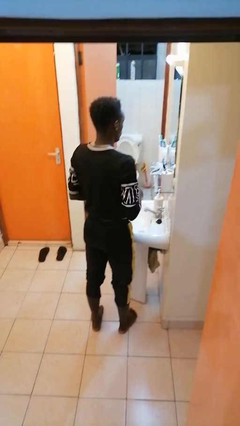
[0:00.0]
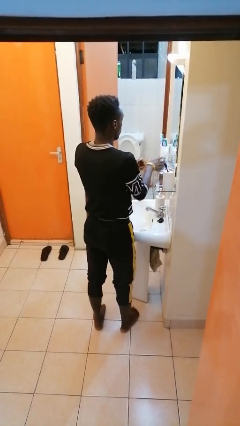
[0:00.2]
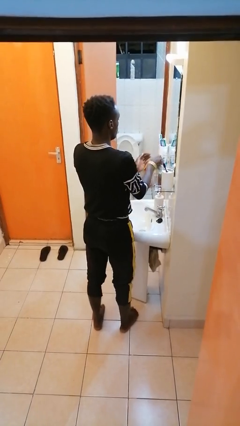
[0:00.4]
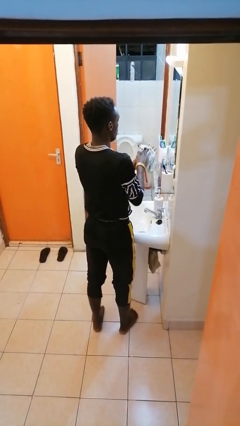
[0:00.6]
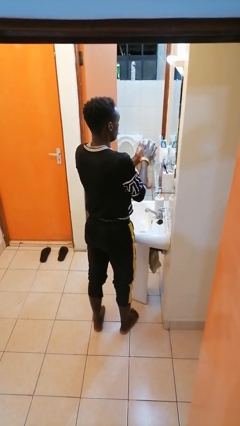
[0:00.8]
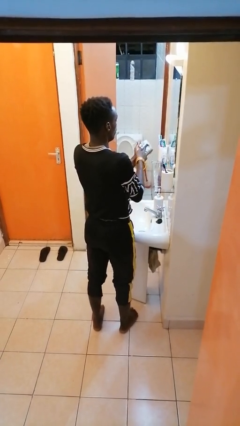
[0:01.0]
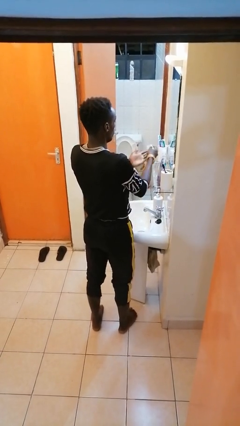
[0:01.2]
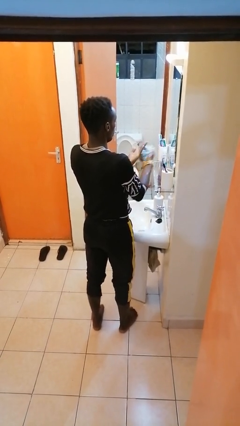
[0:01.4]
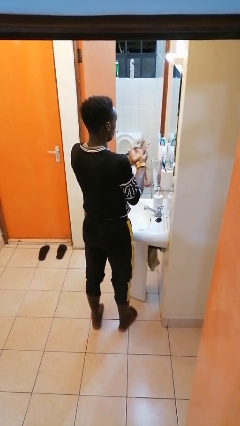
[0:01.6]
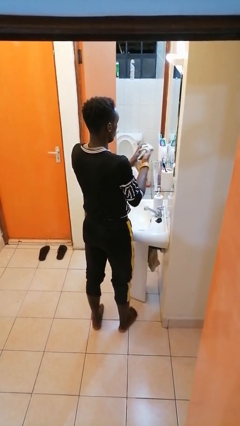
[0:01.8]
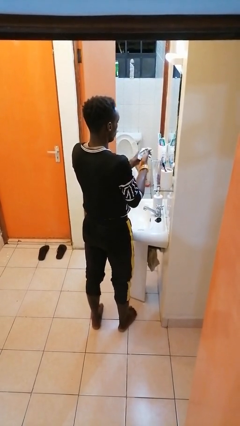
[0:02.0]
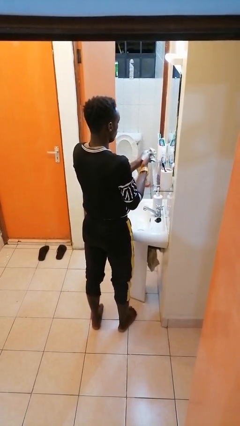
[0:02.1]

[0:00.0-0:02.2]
person dries hands with towel

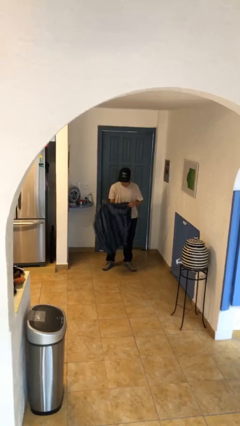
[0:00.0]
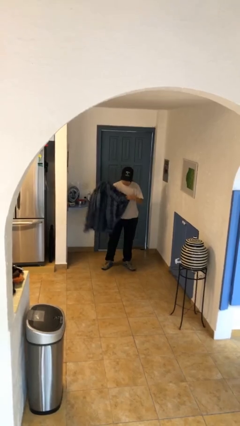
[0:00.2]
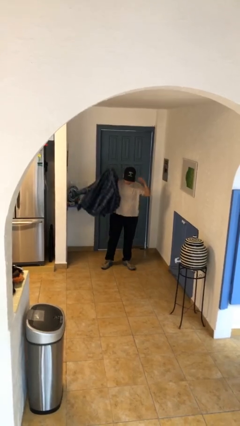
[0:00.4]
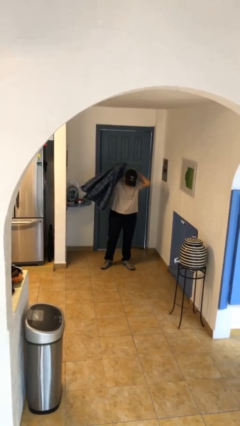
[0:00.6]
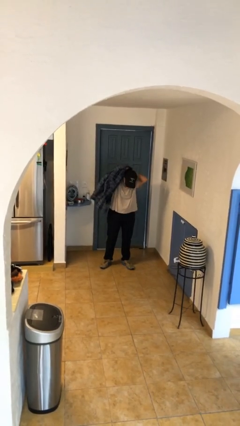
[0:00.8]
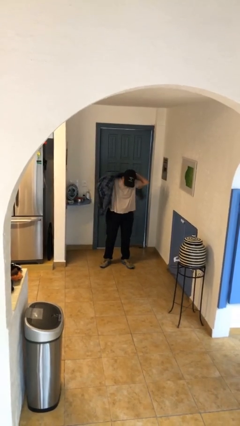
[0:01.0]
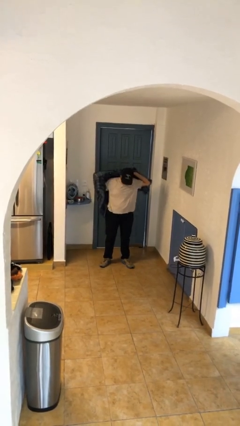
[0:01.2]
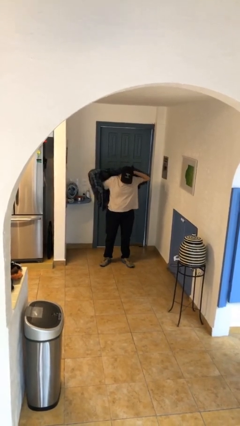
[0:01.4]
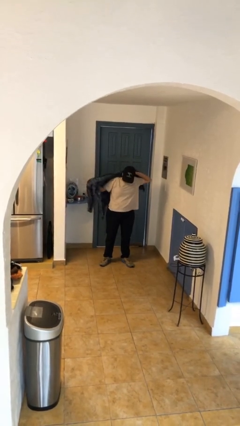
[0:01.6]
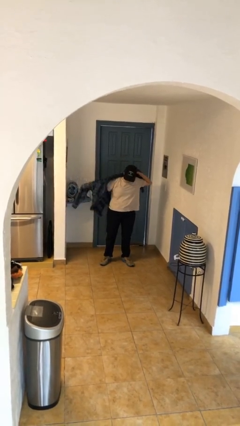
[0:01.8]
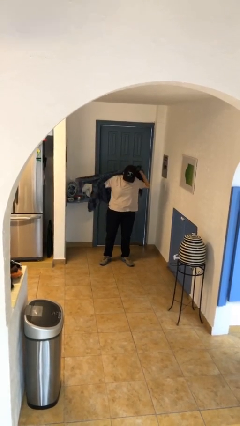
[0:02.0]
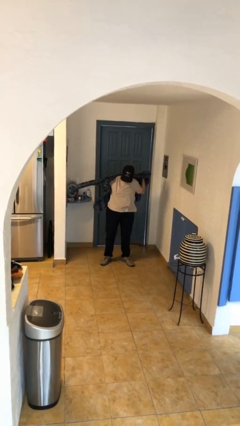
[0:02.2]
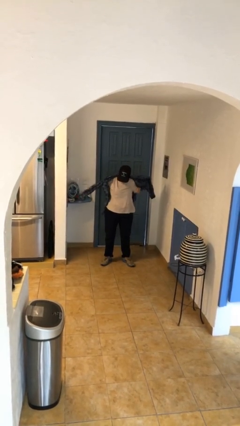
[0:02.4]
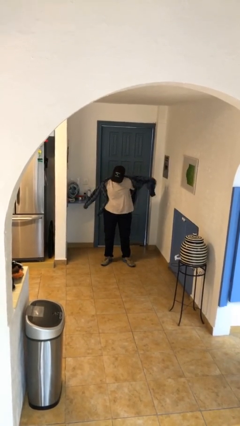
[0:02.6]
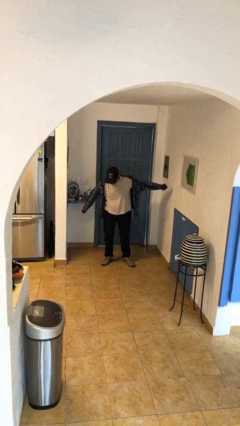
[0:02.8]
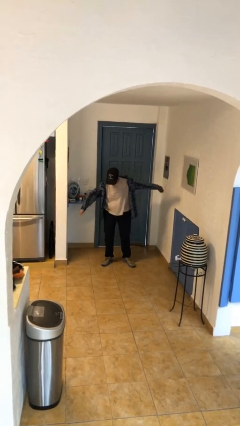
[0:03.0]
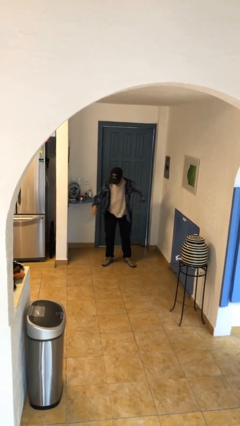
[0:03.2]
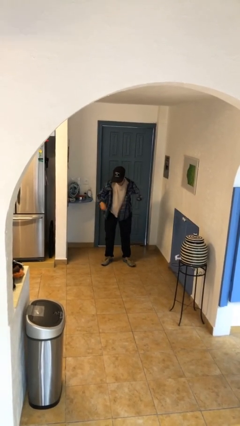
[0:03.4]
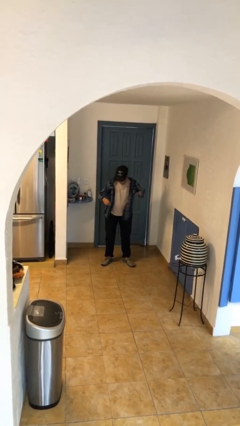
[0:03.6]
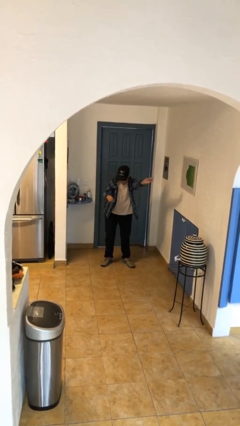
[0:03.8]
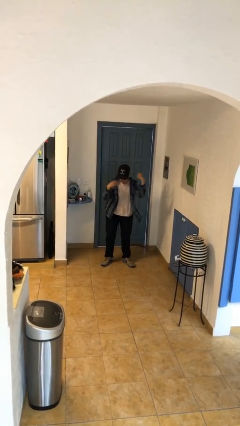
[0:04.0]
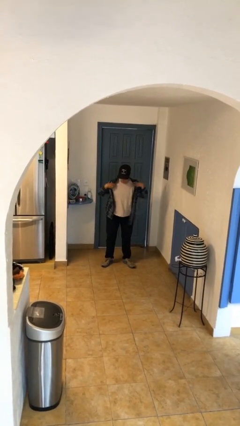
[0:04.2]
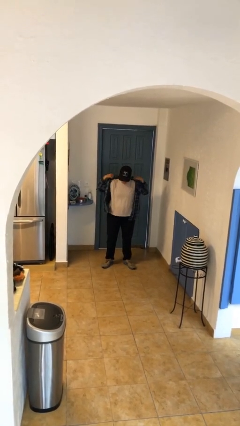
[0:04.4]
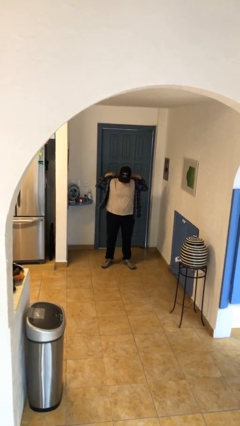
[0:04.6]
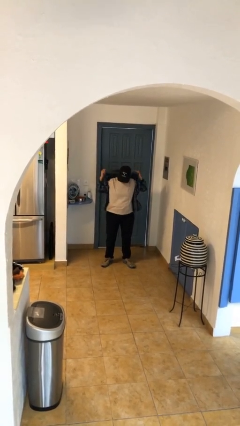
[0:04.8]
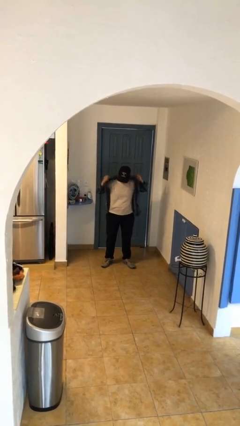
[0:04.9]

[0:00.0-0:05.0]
person puts on shirt

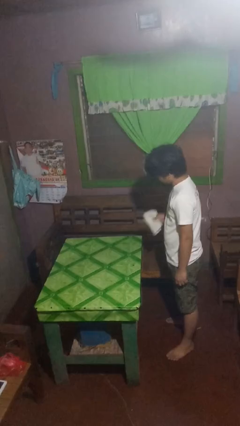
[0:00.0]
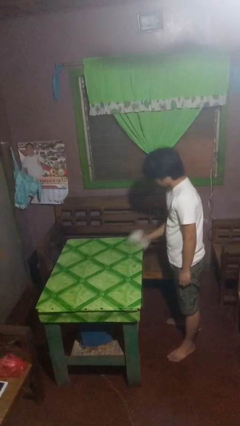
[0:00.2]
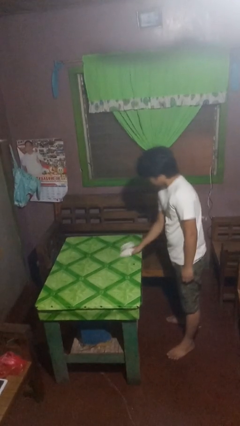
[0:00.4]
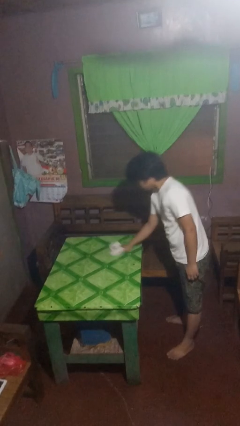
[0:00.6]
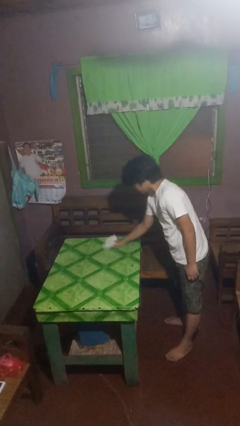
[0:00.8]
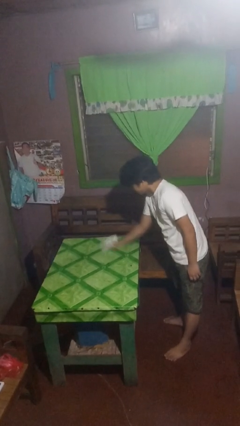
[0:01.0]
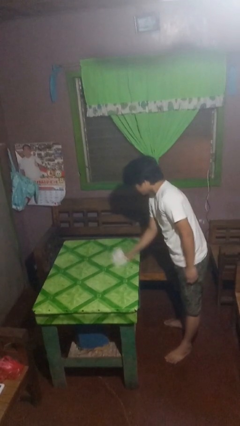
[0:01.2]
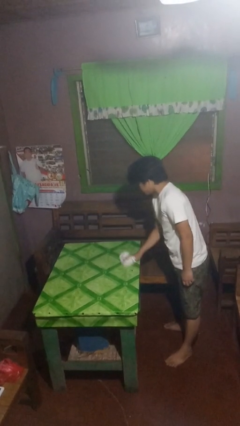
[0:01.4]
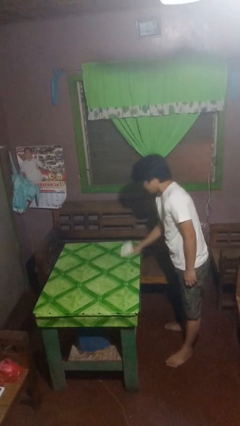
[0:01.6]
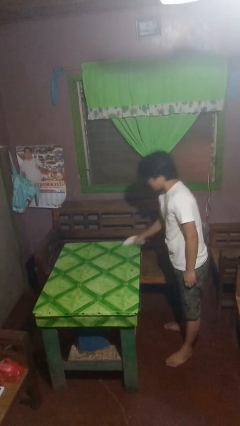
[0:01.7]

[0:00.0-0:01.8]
person cleans table with rag

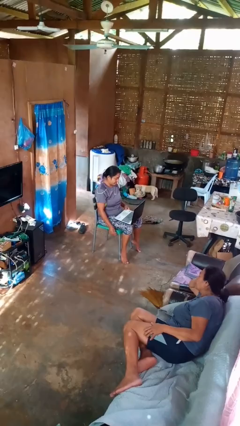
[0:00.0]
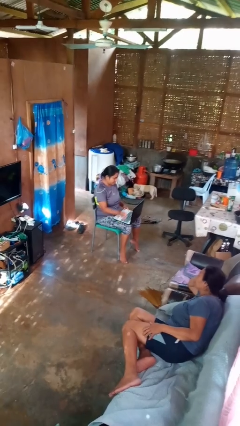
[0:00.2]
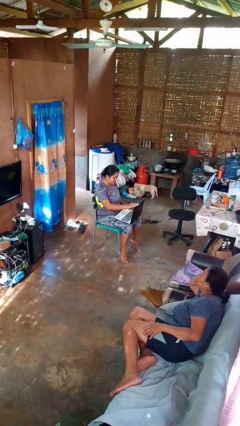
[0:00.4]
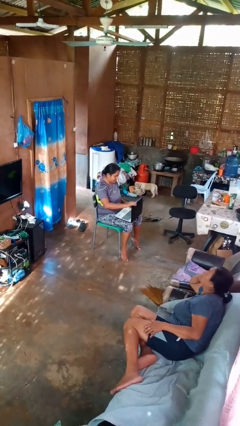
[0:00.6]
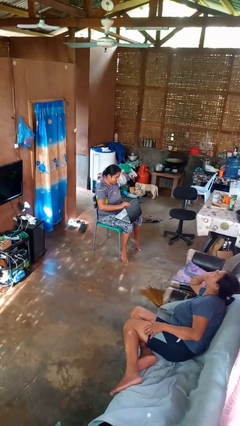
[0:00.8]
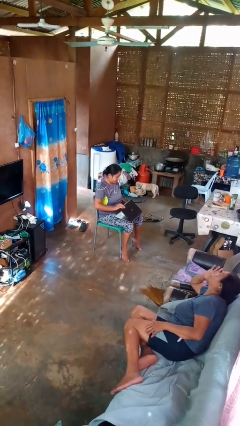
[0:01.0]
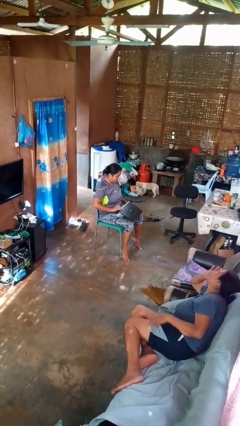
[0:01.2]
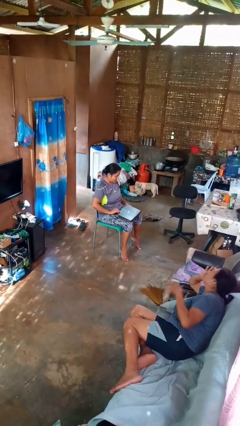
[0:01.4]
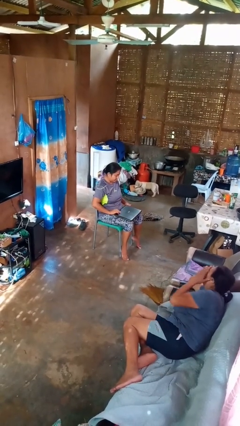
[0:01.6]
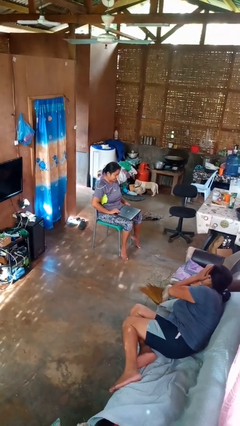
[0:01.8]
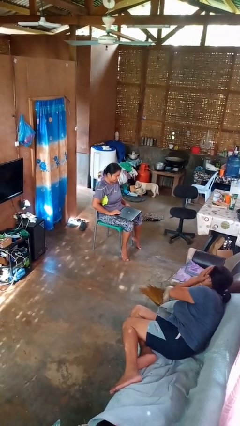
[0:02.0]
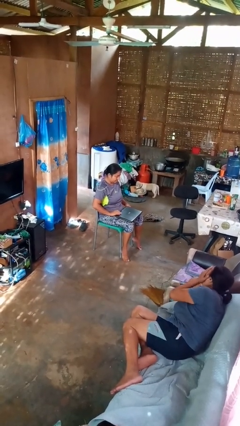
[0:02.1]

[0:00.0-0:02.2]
person closes laptop

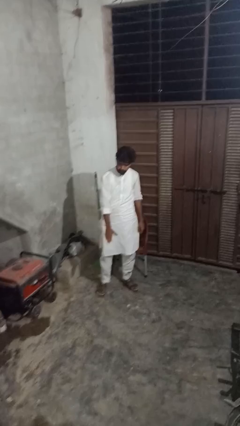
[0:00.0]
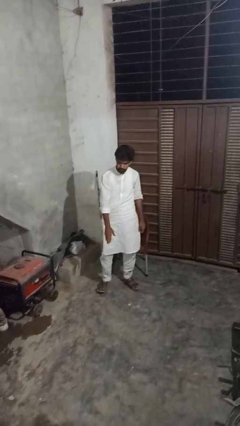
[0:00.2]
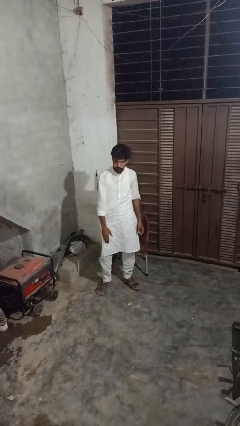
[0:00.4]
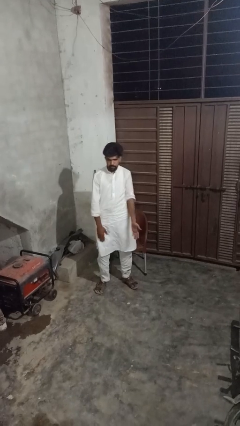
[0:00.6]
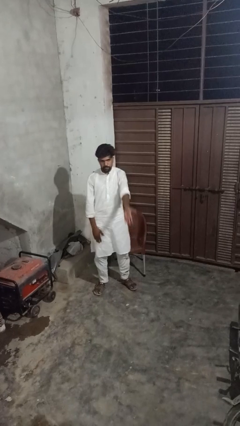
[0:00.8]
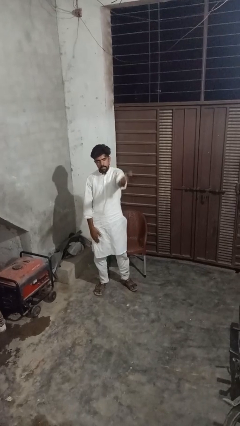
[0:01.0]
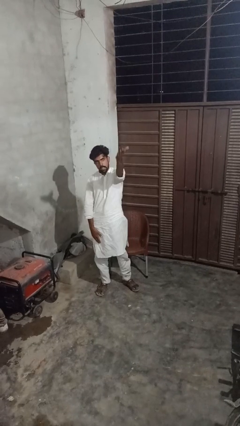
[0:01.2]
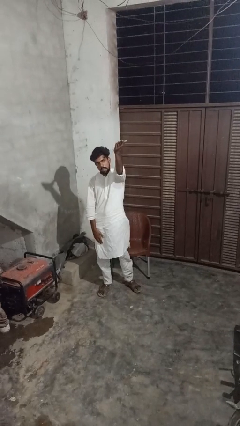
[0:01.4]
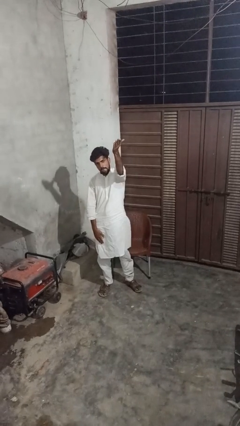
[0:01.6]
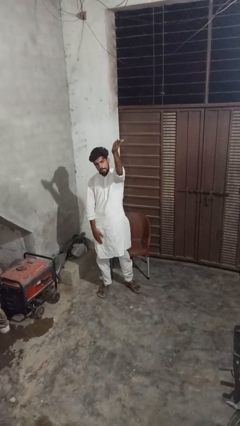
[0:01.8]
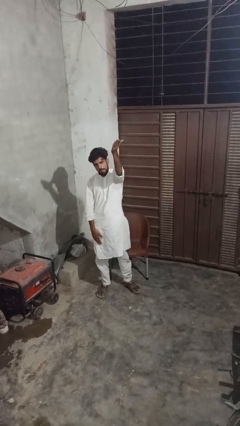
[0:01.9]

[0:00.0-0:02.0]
person gestures swipe up

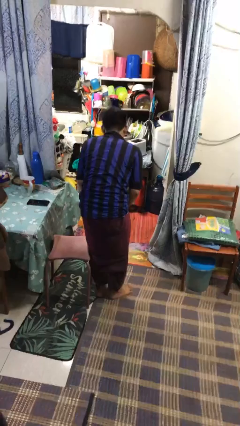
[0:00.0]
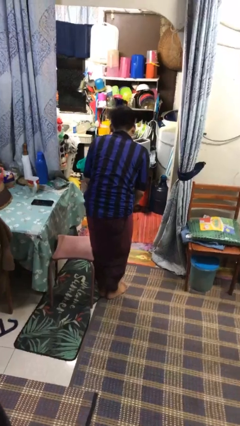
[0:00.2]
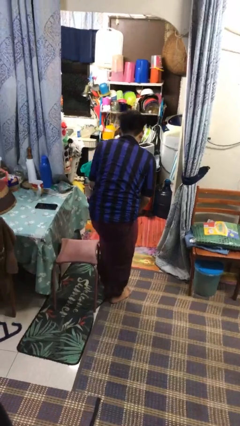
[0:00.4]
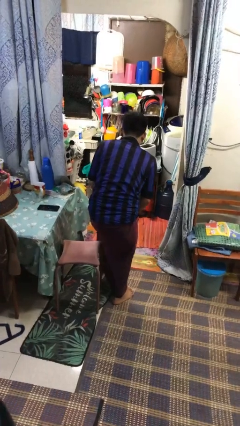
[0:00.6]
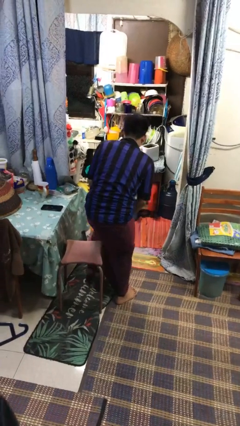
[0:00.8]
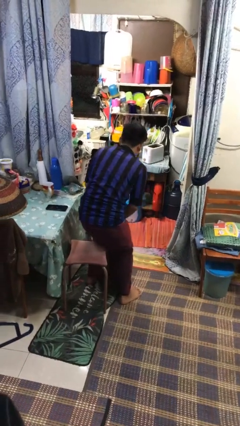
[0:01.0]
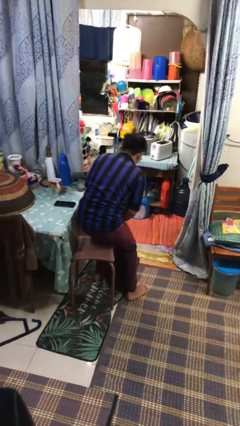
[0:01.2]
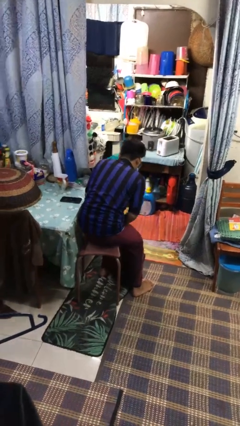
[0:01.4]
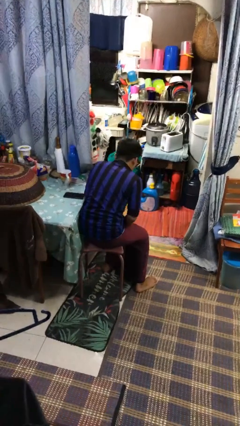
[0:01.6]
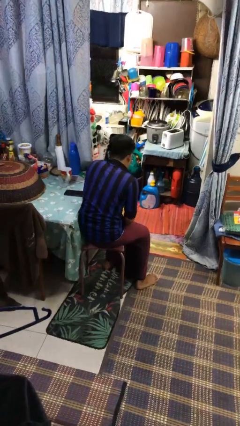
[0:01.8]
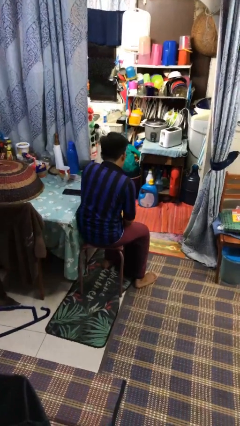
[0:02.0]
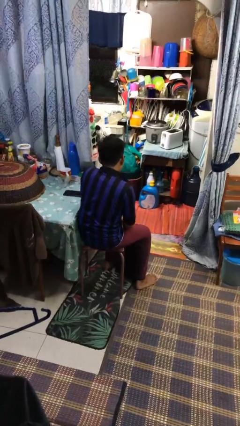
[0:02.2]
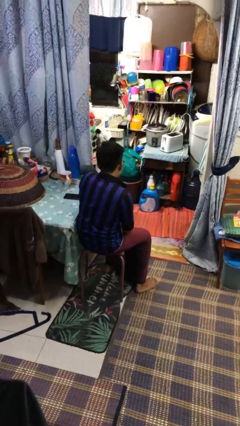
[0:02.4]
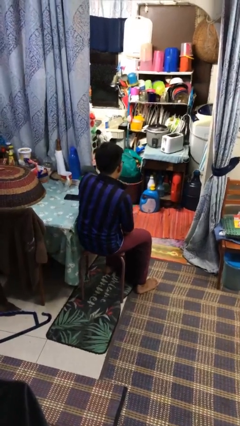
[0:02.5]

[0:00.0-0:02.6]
person sits down

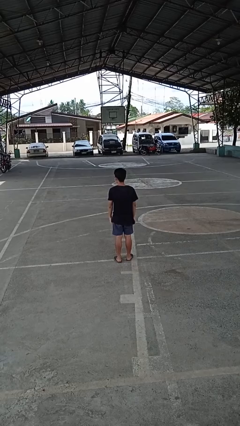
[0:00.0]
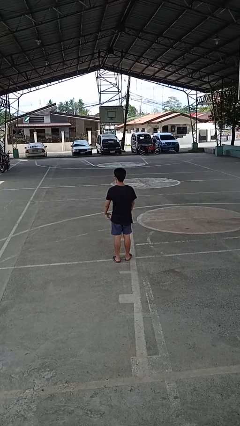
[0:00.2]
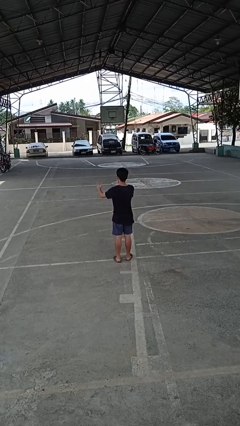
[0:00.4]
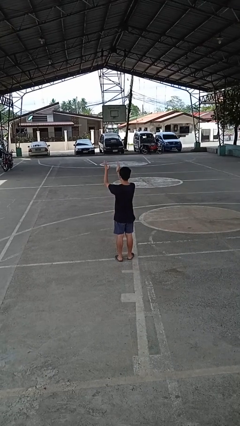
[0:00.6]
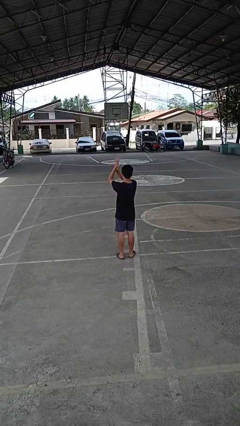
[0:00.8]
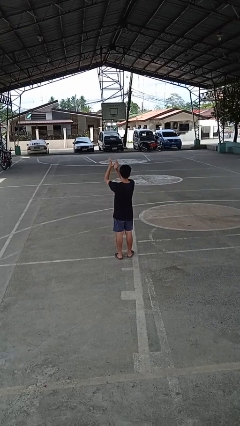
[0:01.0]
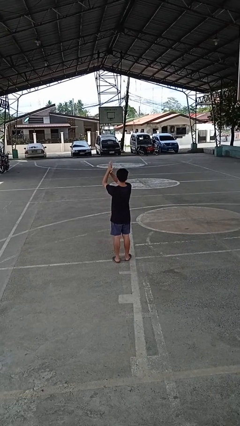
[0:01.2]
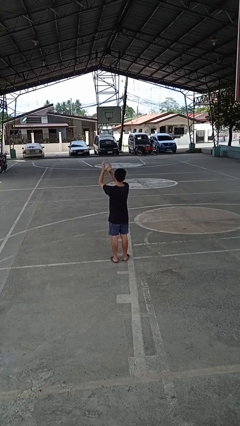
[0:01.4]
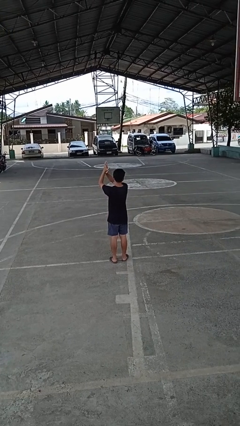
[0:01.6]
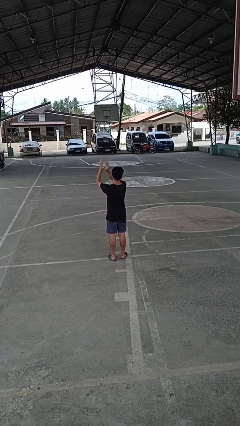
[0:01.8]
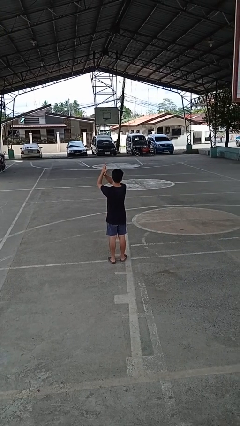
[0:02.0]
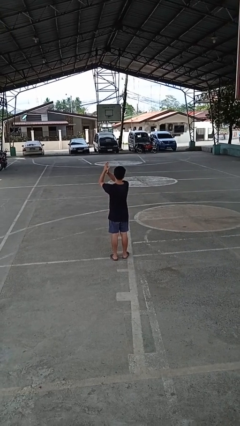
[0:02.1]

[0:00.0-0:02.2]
person claps hands
